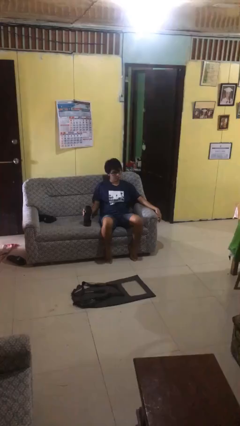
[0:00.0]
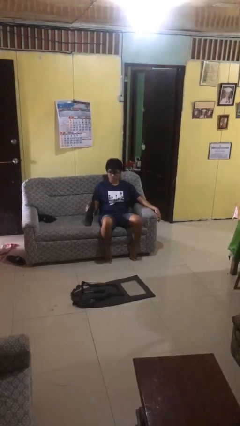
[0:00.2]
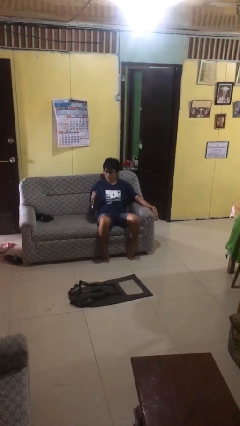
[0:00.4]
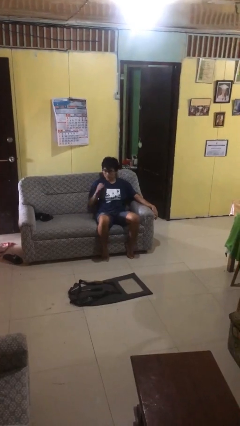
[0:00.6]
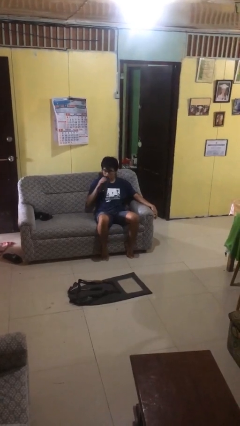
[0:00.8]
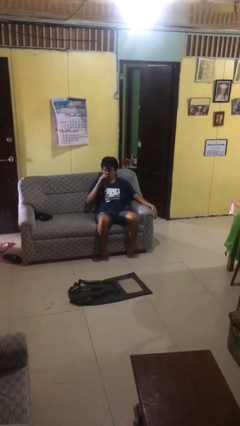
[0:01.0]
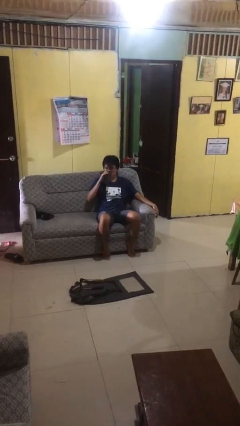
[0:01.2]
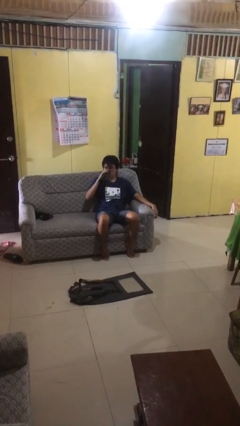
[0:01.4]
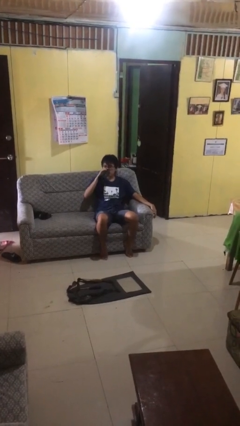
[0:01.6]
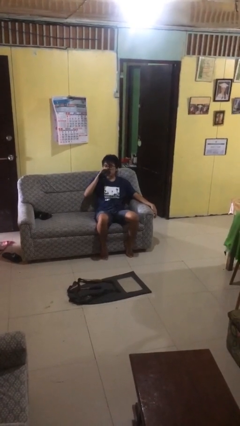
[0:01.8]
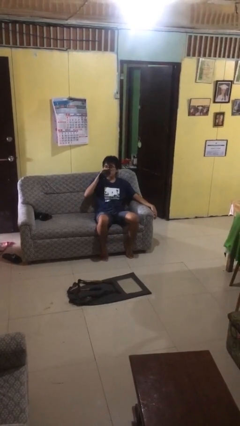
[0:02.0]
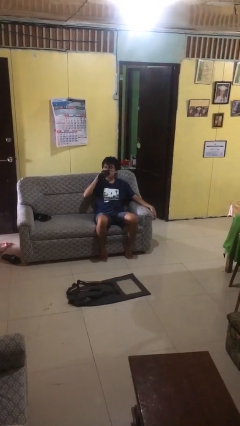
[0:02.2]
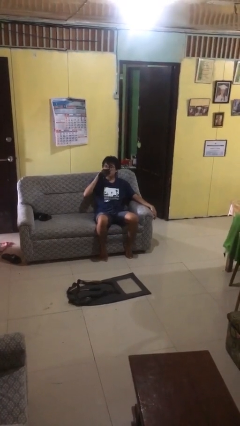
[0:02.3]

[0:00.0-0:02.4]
person drinks from bottle

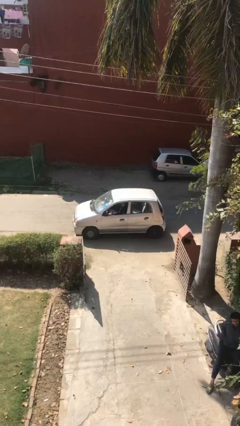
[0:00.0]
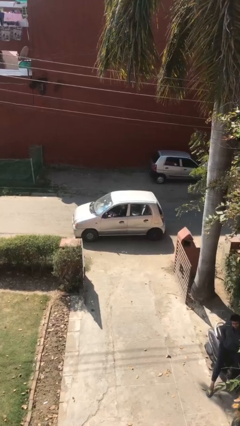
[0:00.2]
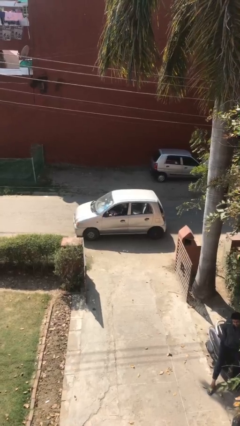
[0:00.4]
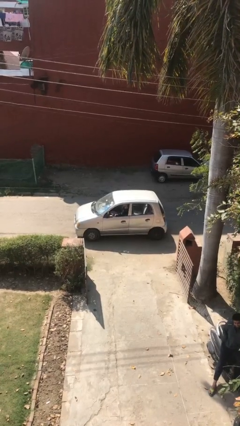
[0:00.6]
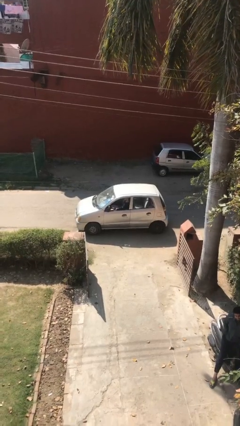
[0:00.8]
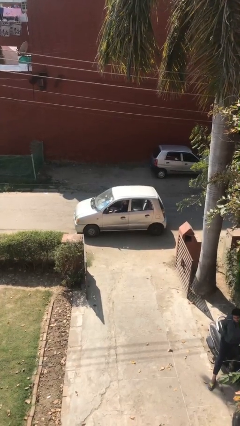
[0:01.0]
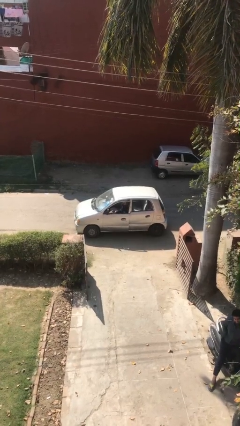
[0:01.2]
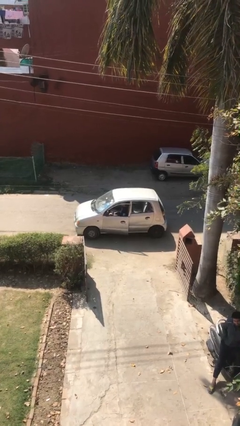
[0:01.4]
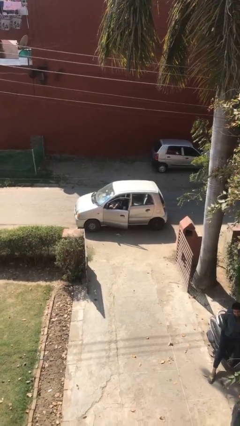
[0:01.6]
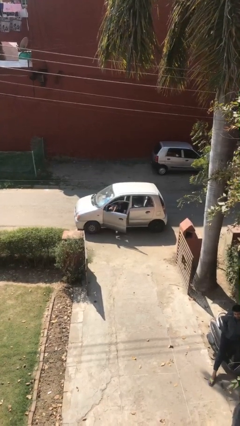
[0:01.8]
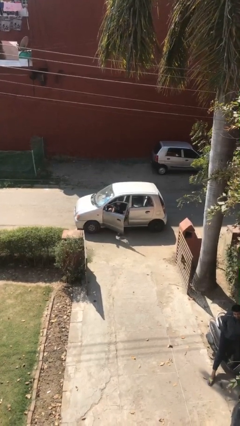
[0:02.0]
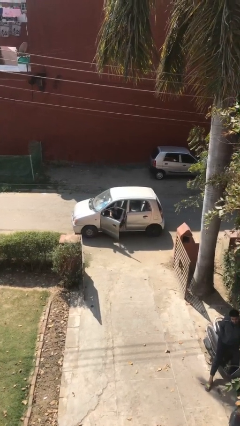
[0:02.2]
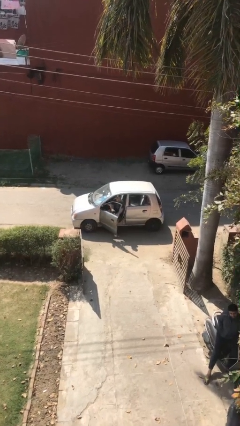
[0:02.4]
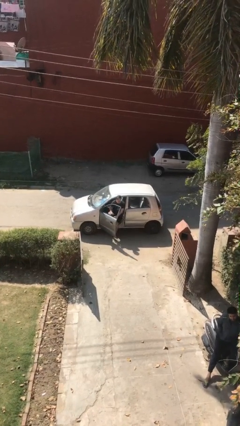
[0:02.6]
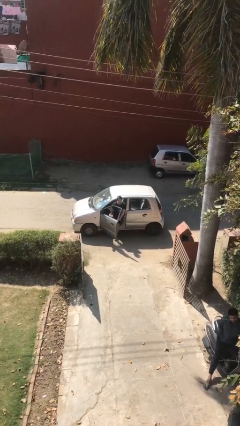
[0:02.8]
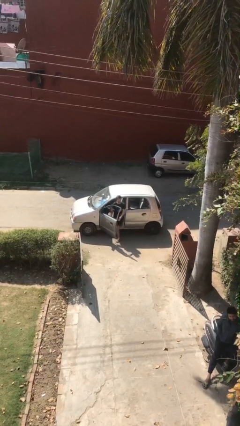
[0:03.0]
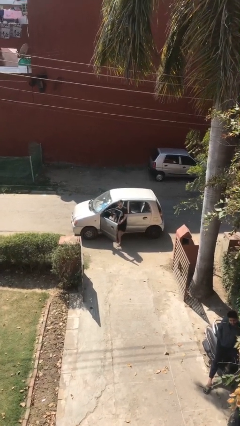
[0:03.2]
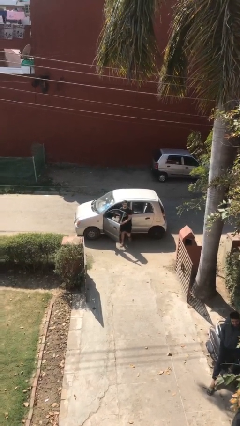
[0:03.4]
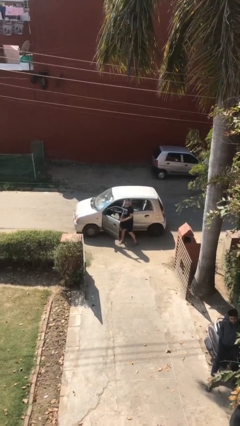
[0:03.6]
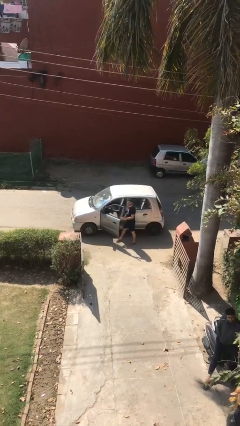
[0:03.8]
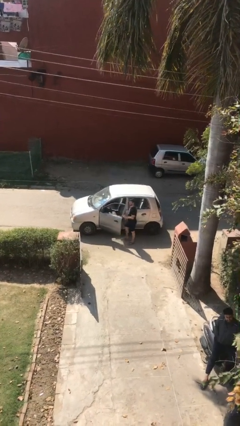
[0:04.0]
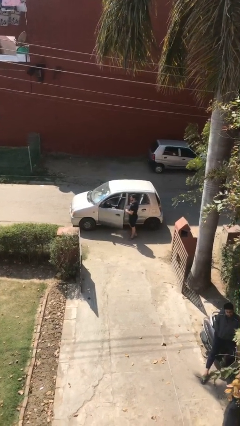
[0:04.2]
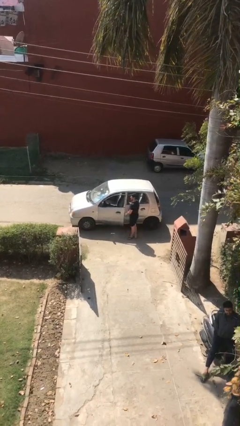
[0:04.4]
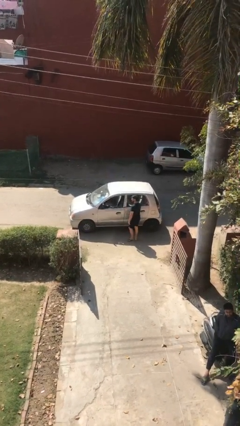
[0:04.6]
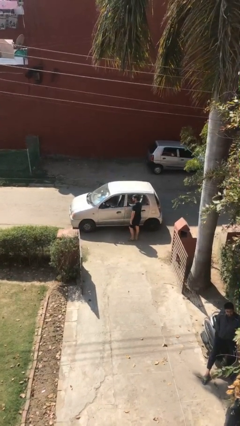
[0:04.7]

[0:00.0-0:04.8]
car drops off person

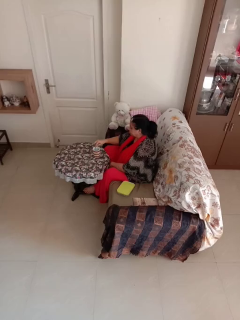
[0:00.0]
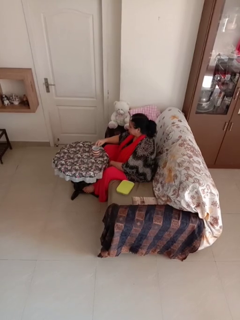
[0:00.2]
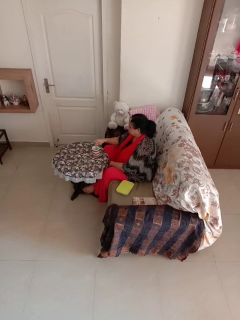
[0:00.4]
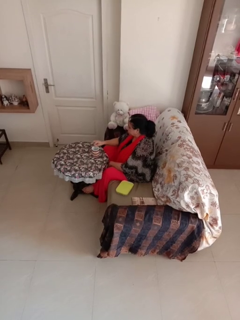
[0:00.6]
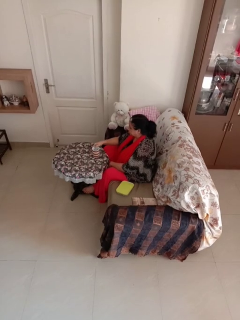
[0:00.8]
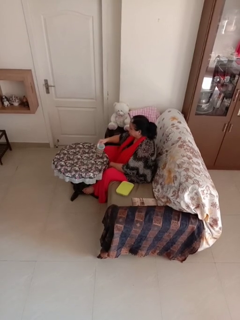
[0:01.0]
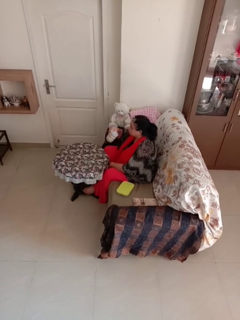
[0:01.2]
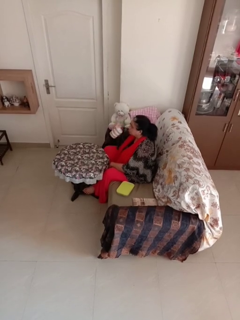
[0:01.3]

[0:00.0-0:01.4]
person stirs mug

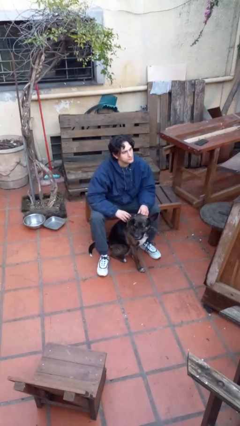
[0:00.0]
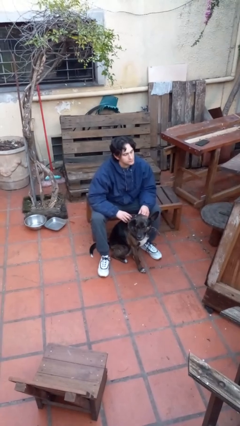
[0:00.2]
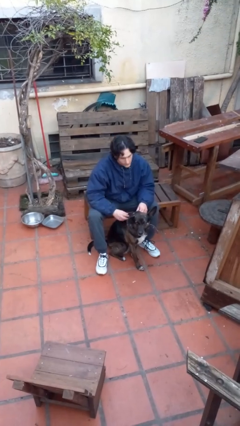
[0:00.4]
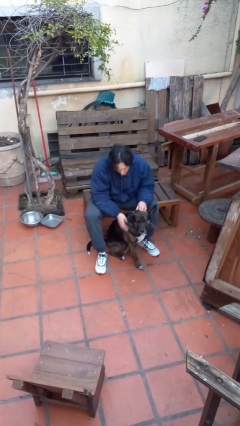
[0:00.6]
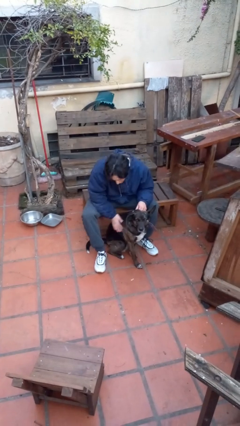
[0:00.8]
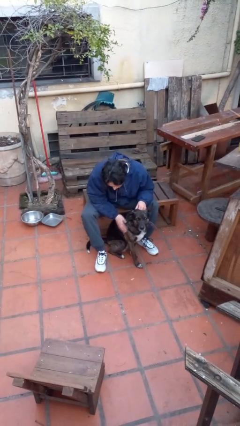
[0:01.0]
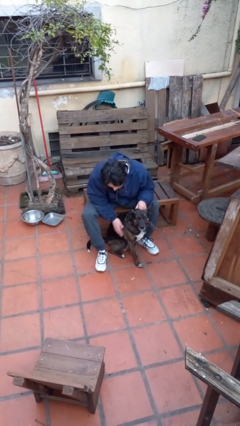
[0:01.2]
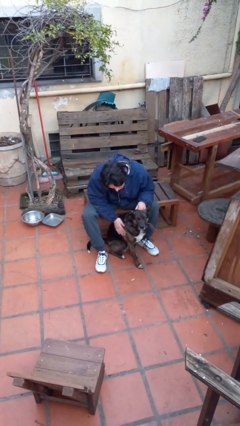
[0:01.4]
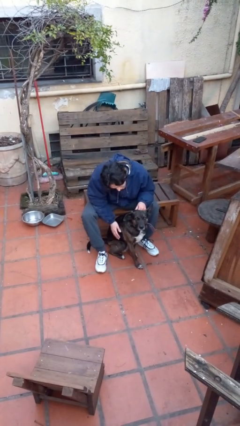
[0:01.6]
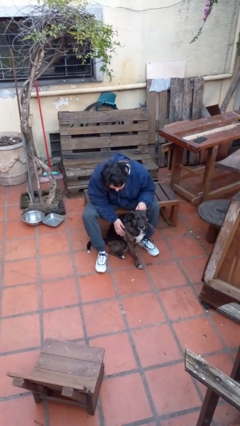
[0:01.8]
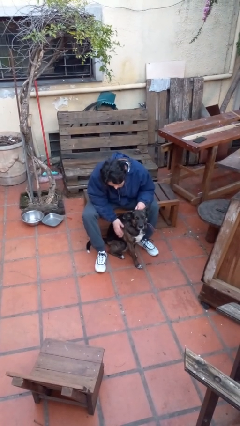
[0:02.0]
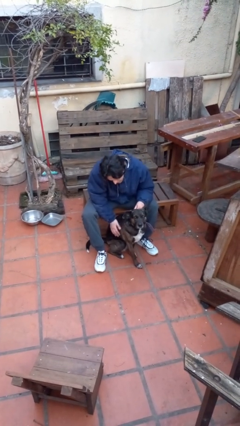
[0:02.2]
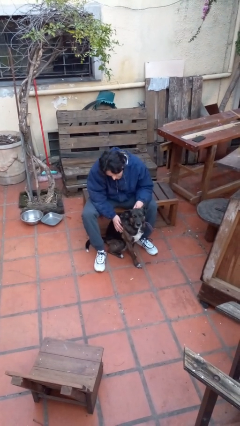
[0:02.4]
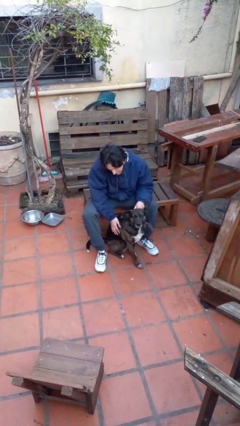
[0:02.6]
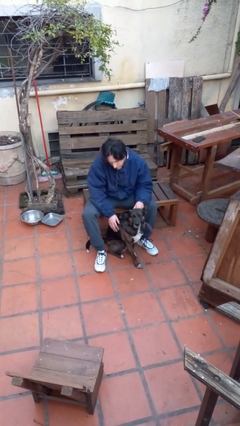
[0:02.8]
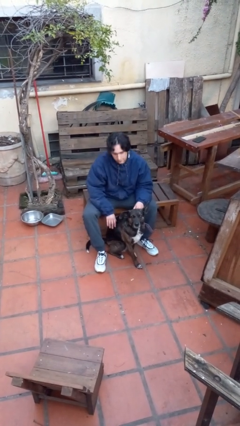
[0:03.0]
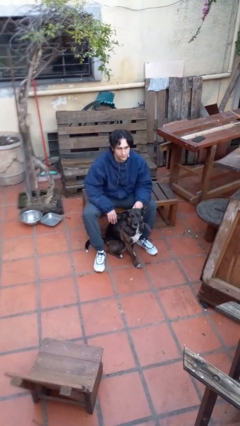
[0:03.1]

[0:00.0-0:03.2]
person pets dog

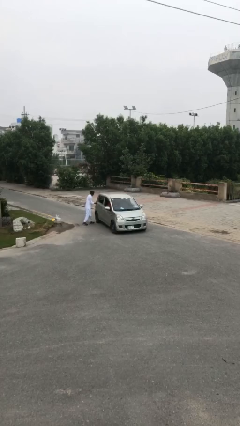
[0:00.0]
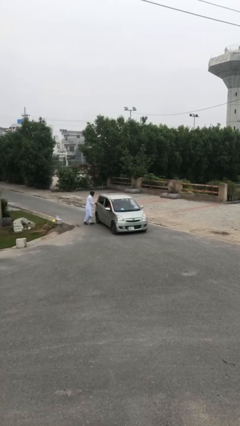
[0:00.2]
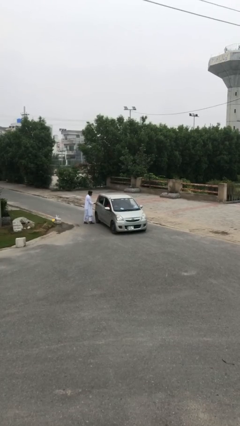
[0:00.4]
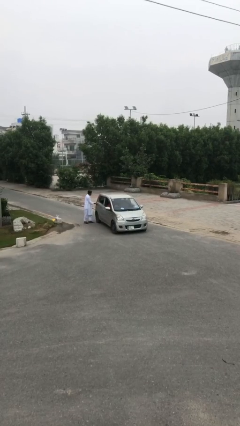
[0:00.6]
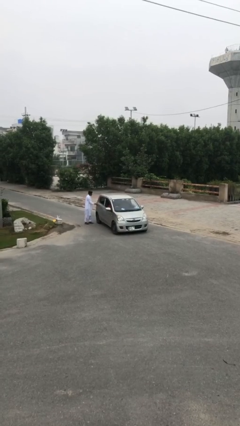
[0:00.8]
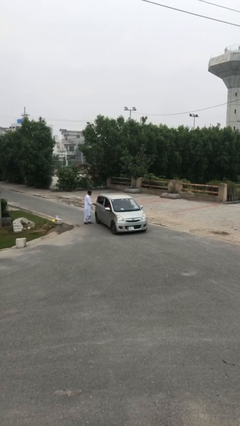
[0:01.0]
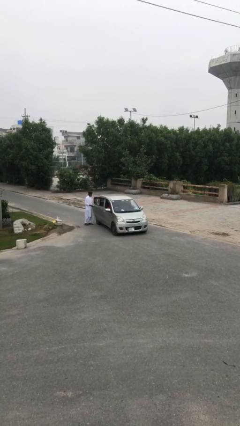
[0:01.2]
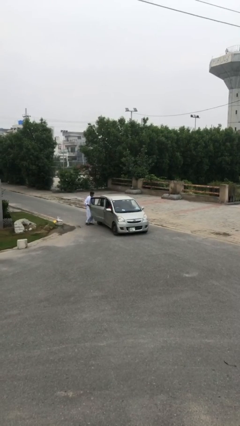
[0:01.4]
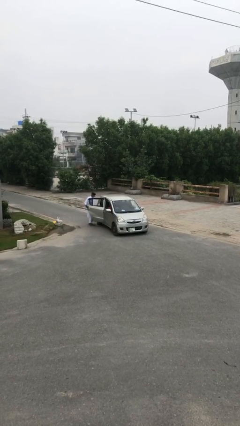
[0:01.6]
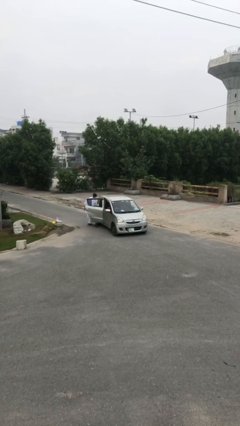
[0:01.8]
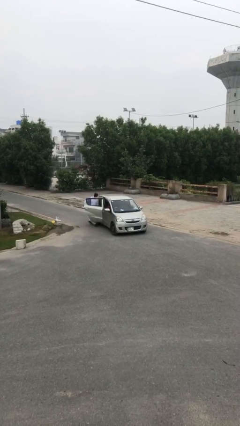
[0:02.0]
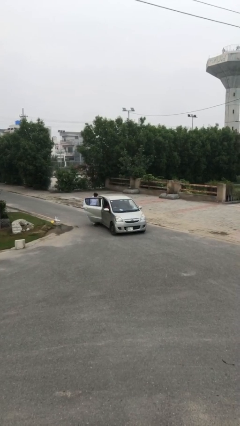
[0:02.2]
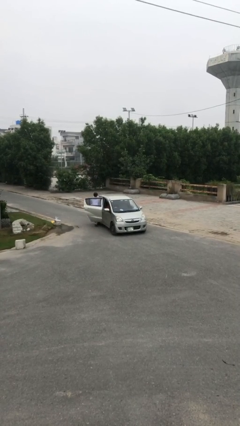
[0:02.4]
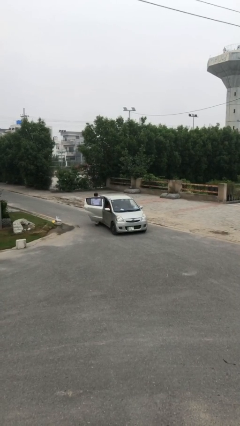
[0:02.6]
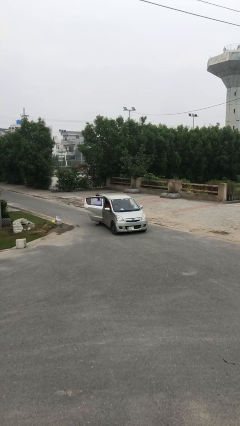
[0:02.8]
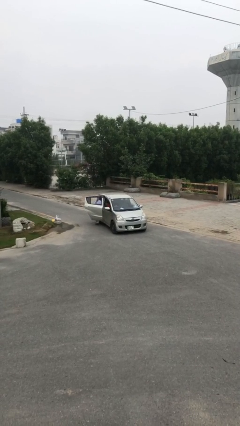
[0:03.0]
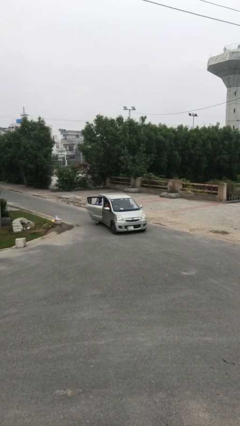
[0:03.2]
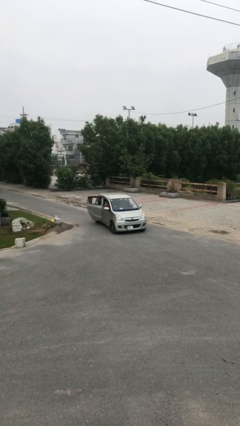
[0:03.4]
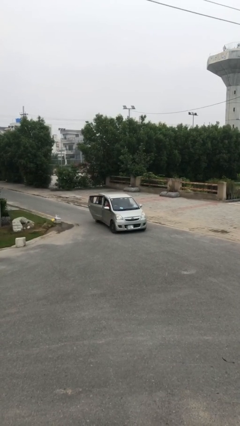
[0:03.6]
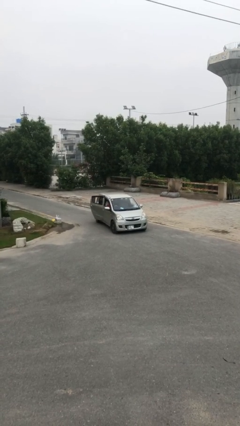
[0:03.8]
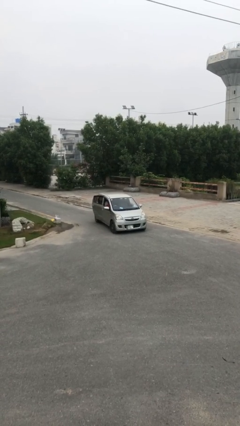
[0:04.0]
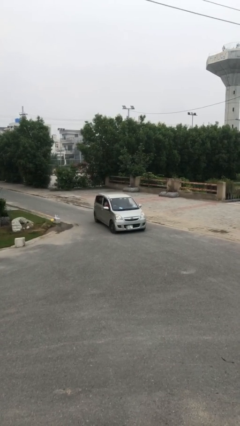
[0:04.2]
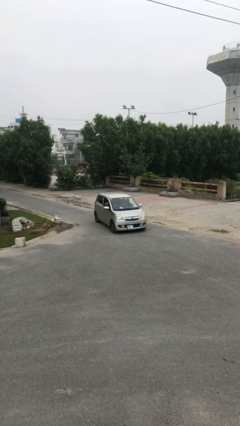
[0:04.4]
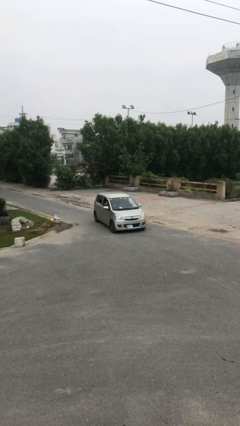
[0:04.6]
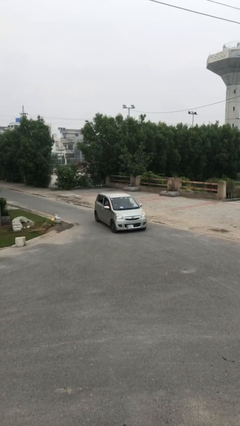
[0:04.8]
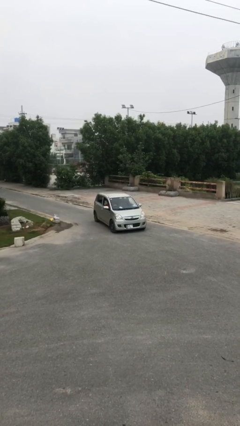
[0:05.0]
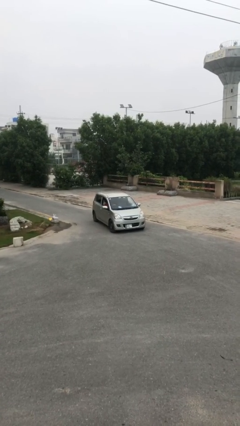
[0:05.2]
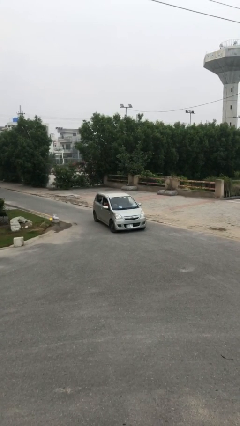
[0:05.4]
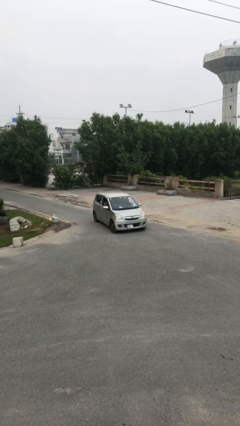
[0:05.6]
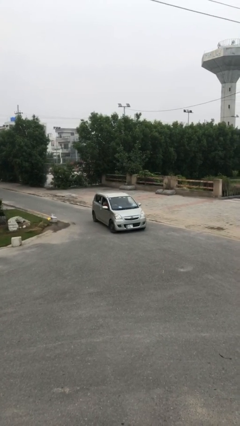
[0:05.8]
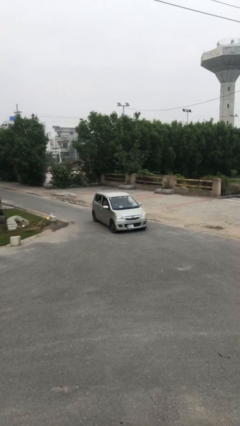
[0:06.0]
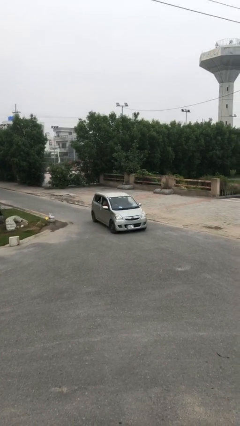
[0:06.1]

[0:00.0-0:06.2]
car picks up person
